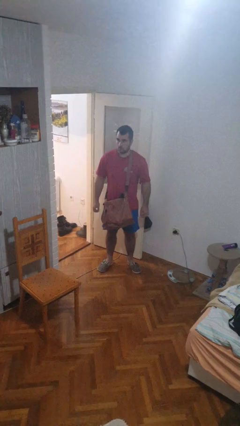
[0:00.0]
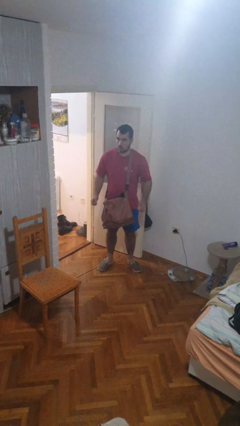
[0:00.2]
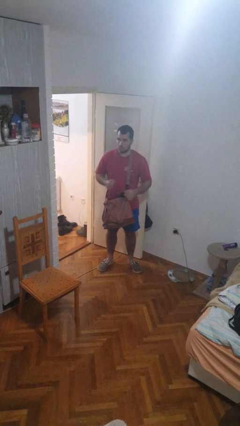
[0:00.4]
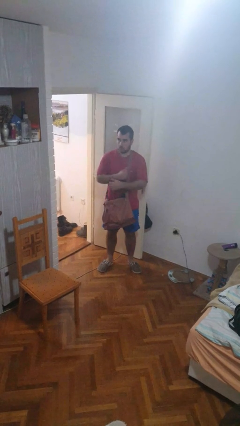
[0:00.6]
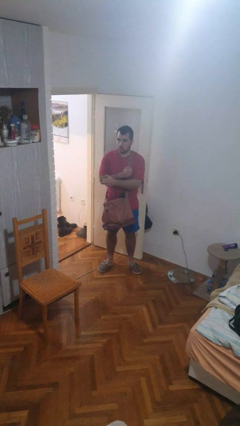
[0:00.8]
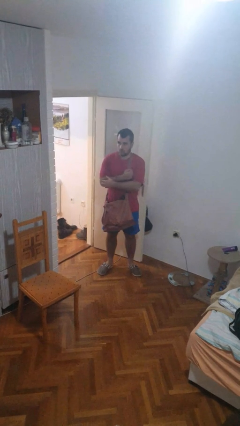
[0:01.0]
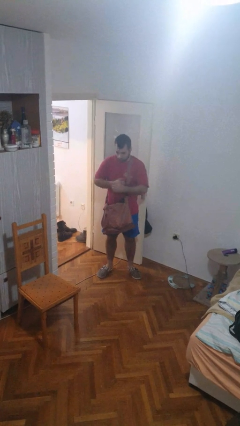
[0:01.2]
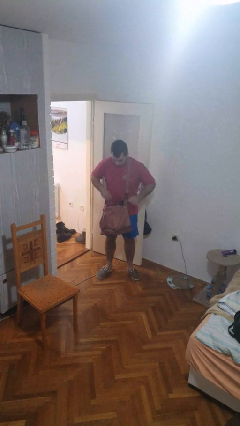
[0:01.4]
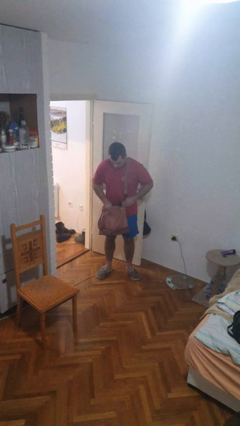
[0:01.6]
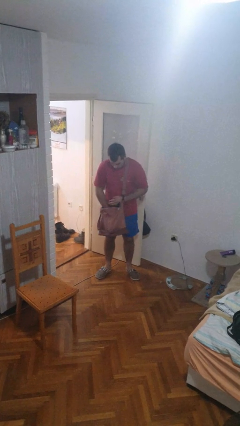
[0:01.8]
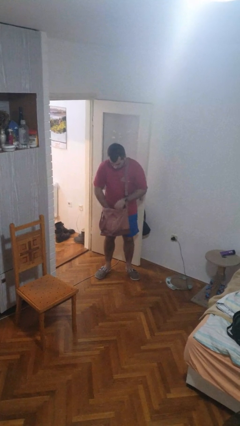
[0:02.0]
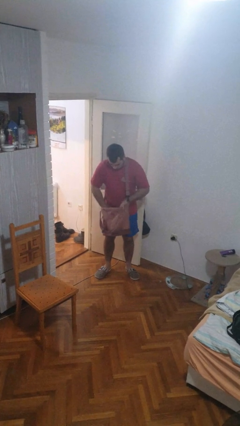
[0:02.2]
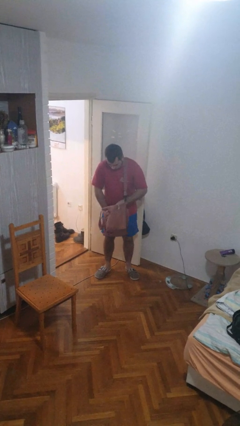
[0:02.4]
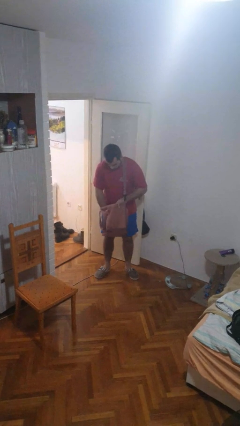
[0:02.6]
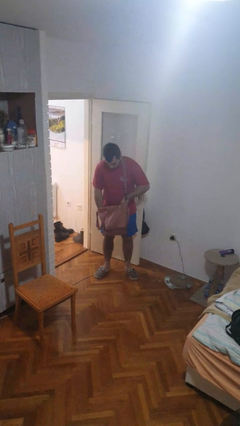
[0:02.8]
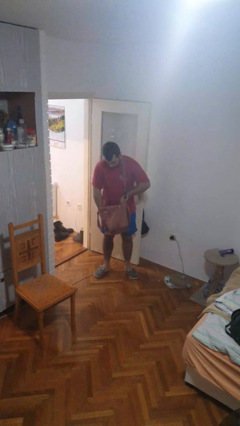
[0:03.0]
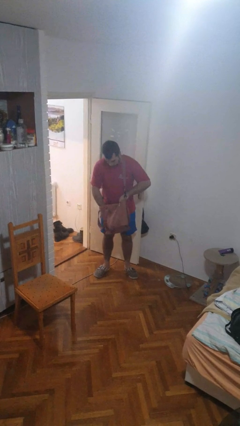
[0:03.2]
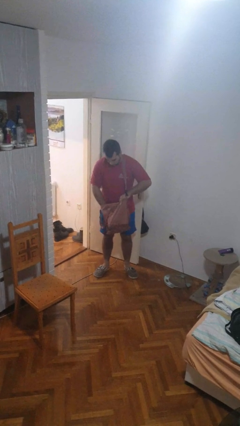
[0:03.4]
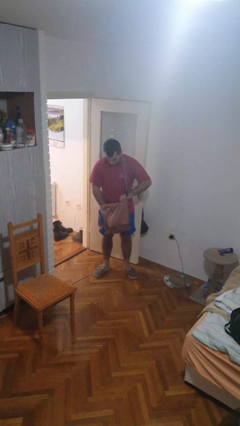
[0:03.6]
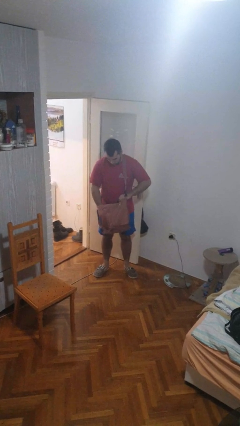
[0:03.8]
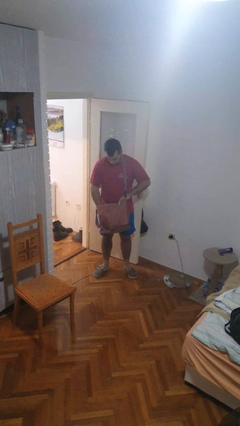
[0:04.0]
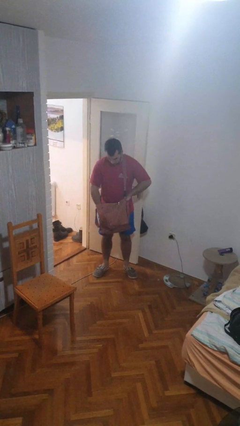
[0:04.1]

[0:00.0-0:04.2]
person searches in purse

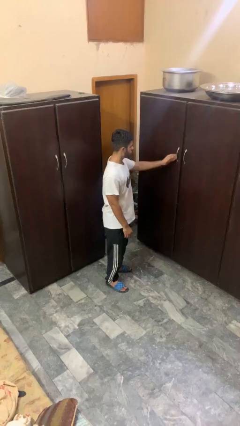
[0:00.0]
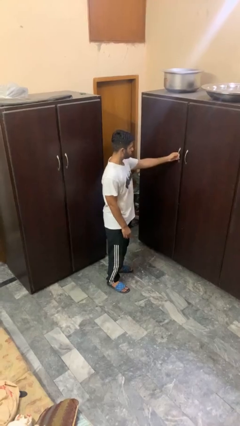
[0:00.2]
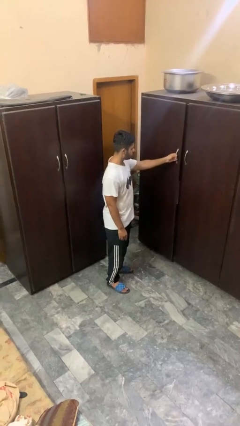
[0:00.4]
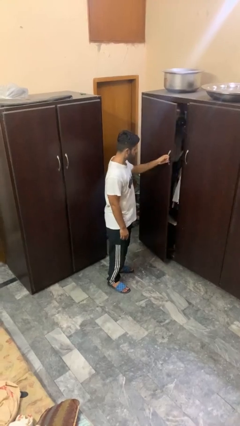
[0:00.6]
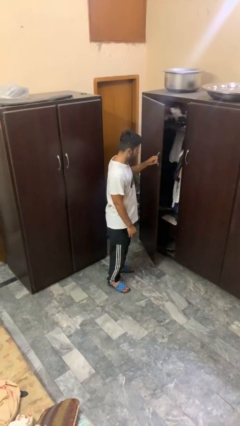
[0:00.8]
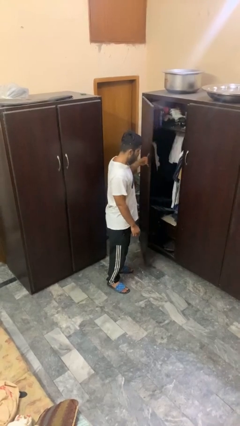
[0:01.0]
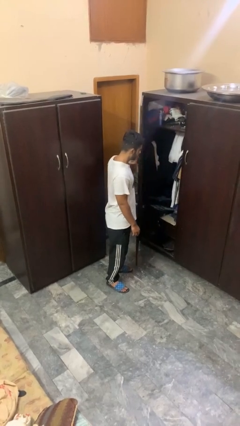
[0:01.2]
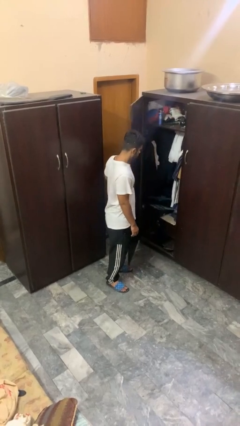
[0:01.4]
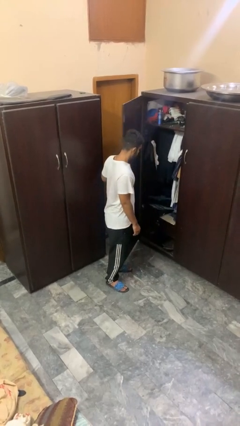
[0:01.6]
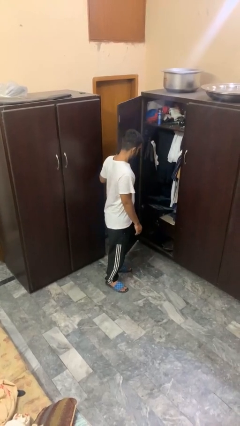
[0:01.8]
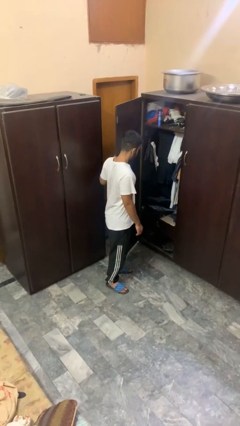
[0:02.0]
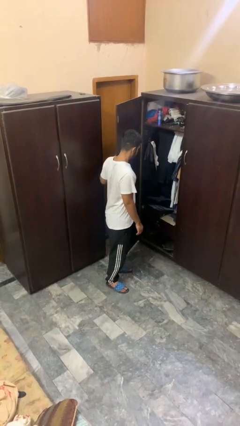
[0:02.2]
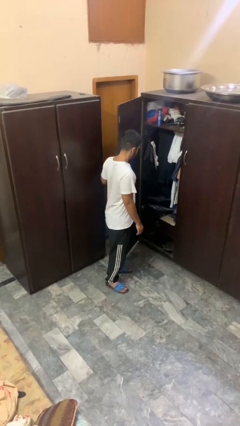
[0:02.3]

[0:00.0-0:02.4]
person opens closet door

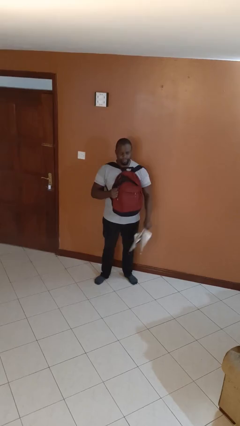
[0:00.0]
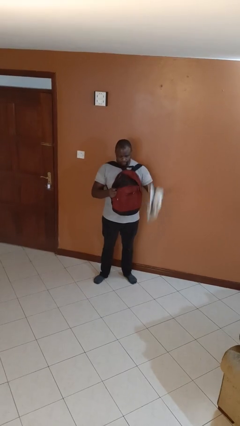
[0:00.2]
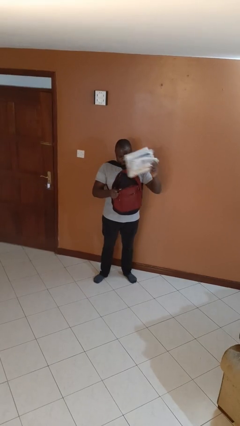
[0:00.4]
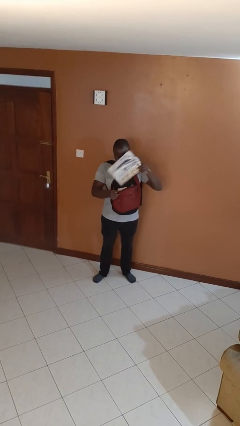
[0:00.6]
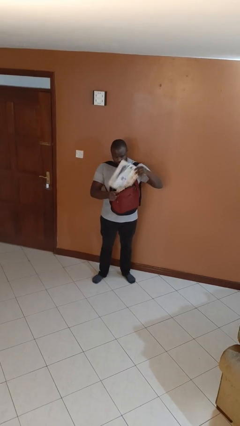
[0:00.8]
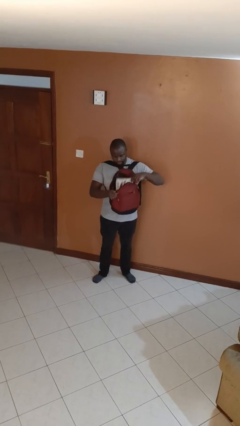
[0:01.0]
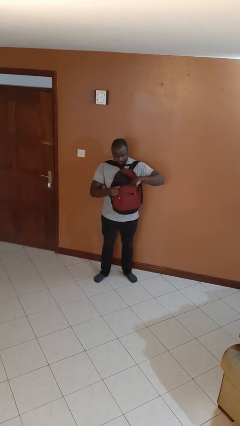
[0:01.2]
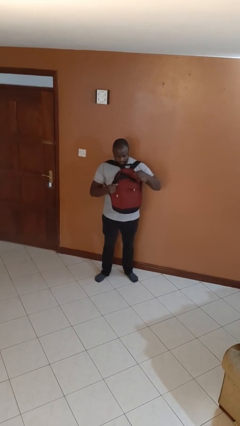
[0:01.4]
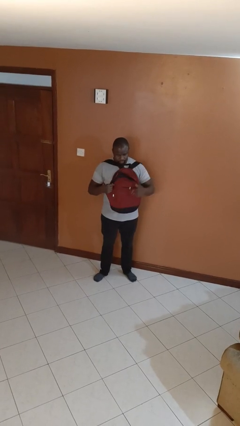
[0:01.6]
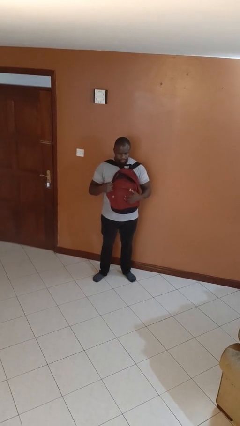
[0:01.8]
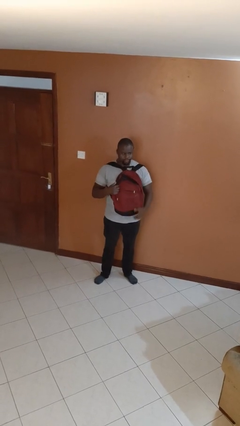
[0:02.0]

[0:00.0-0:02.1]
person puts object into backpack

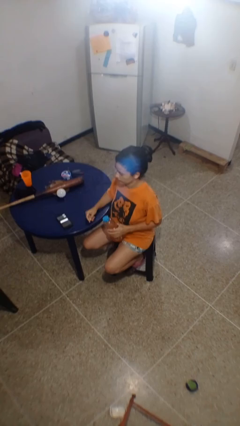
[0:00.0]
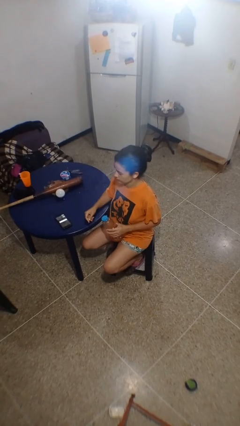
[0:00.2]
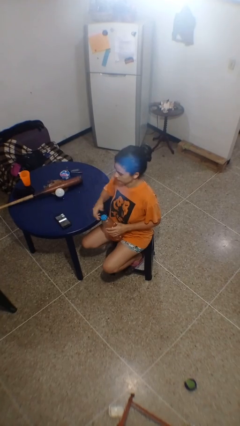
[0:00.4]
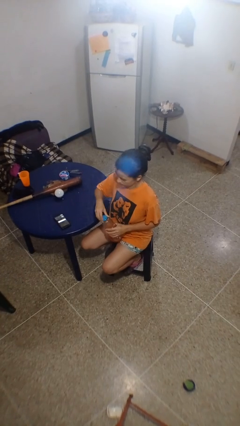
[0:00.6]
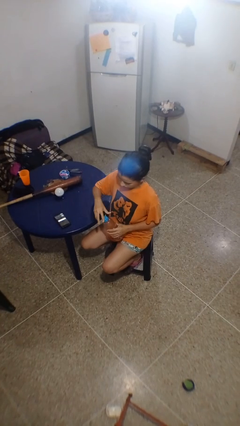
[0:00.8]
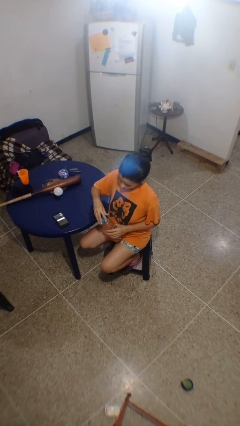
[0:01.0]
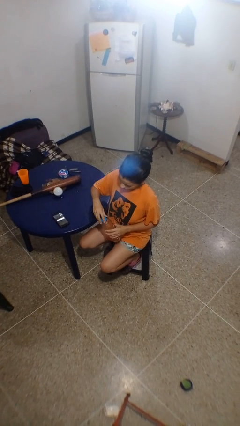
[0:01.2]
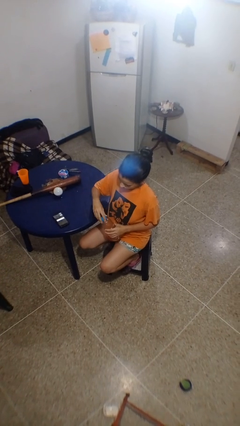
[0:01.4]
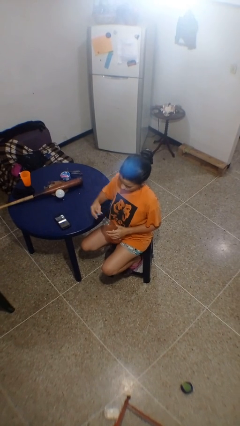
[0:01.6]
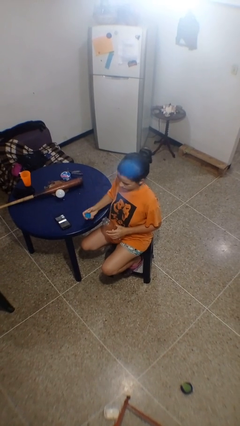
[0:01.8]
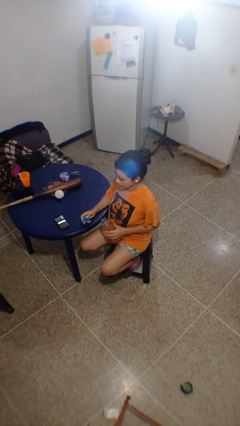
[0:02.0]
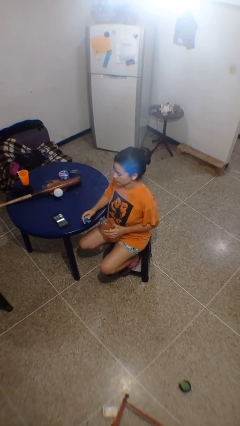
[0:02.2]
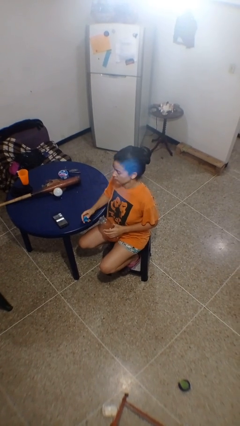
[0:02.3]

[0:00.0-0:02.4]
person unscrews lid from bottle

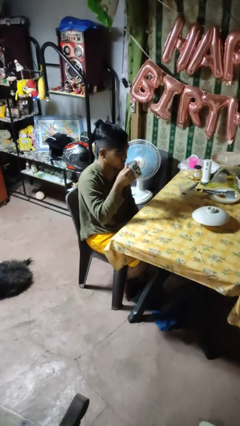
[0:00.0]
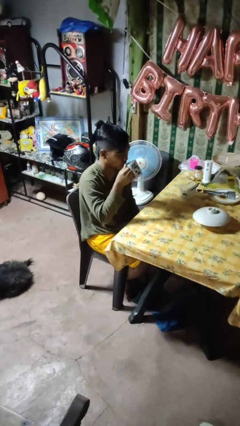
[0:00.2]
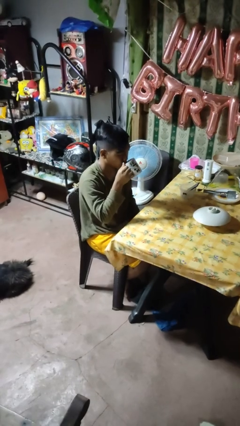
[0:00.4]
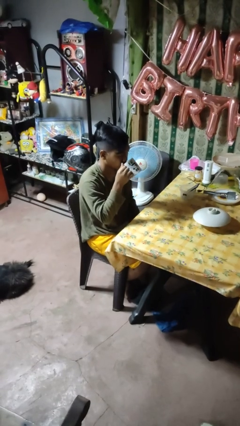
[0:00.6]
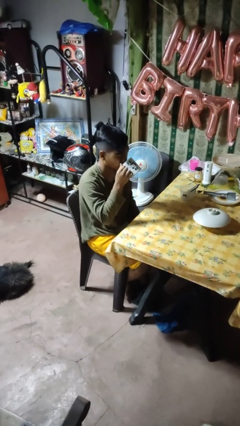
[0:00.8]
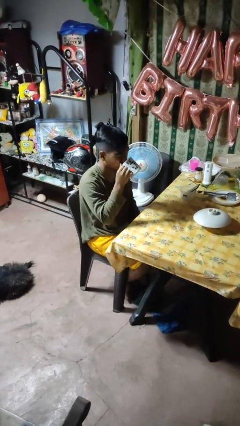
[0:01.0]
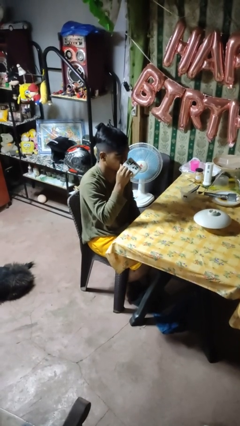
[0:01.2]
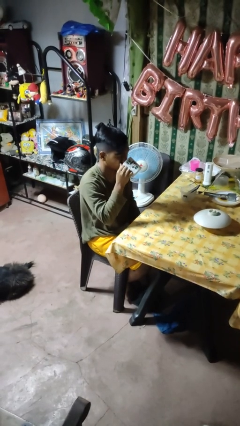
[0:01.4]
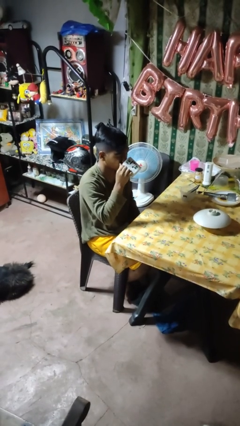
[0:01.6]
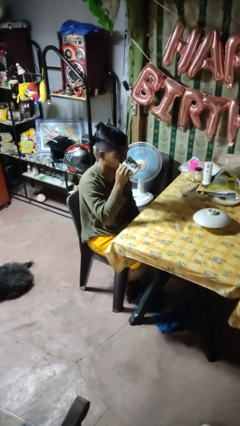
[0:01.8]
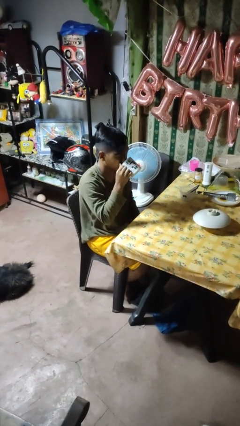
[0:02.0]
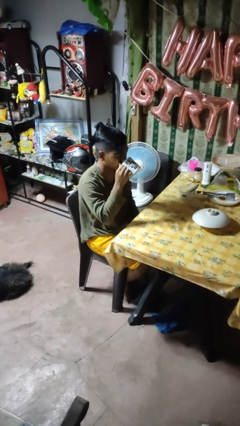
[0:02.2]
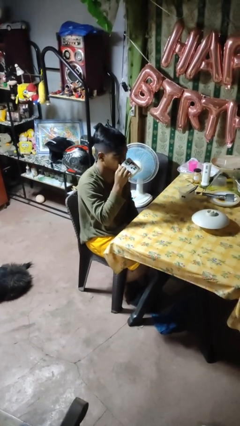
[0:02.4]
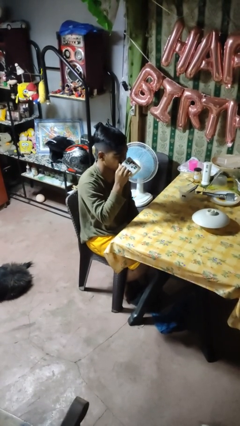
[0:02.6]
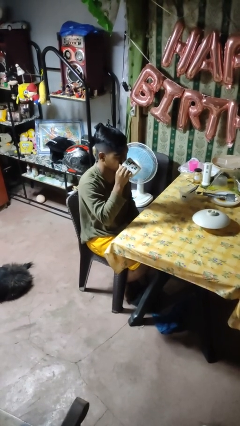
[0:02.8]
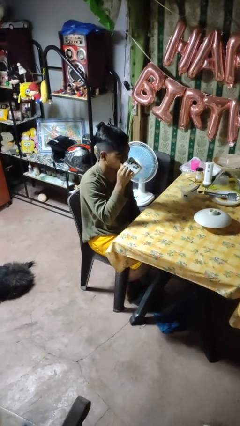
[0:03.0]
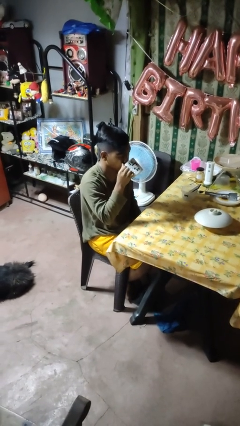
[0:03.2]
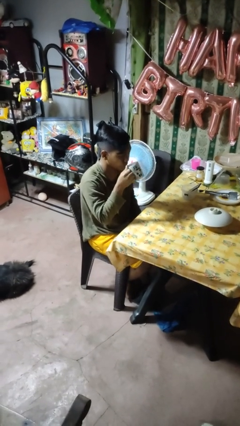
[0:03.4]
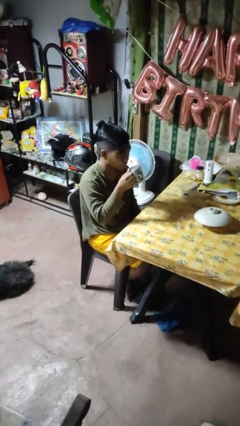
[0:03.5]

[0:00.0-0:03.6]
person drinks from mug

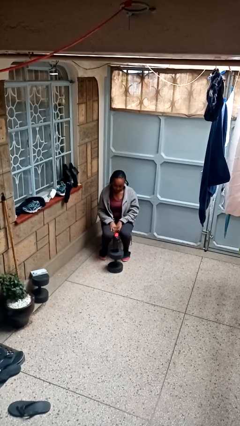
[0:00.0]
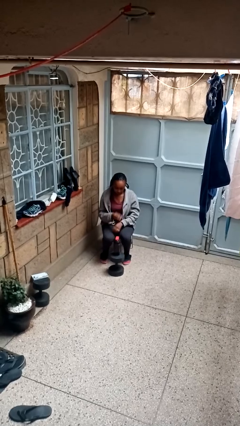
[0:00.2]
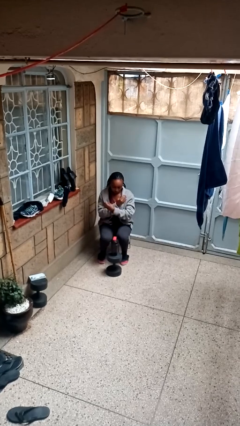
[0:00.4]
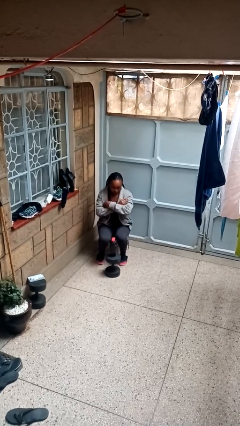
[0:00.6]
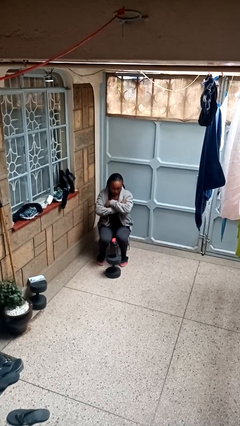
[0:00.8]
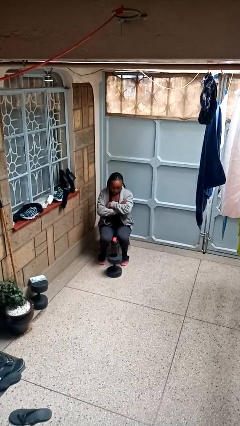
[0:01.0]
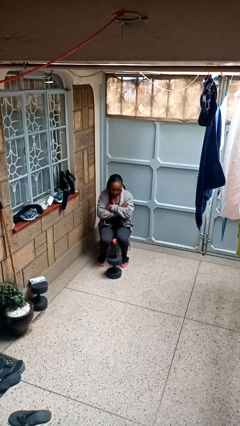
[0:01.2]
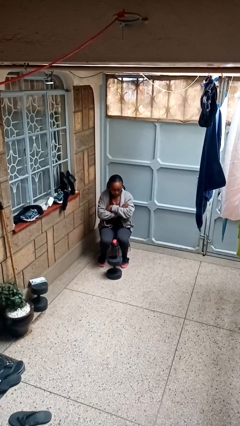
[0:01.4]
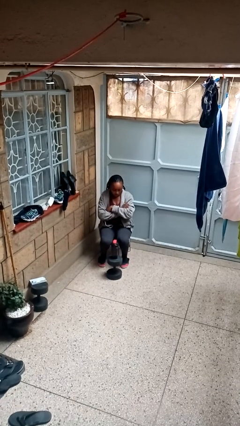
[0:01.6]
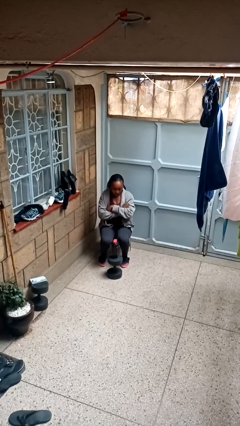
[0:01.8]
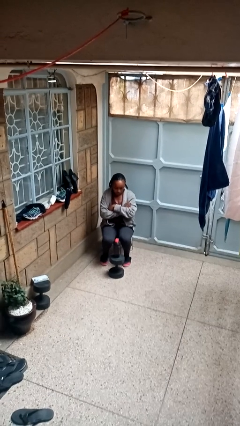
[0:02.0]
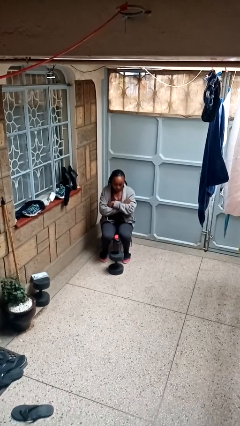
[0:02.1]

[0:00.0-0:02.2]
person gestures arms x

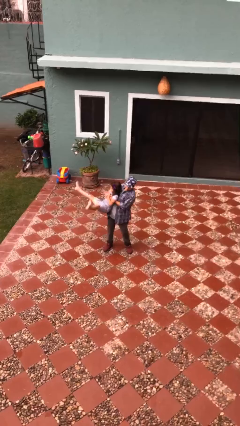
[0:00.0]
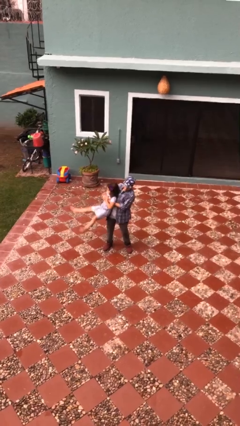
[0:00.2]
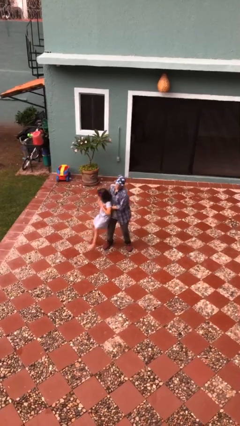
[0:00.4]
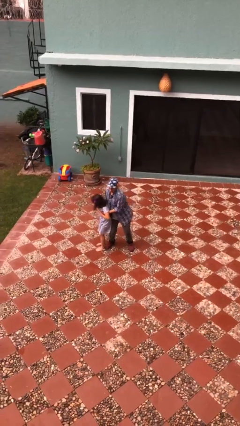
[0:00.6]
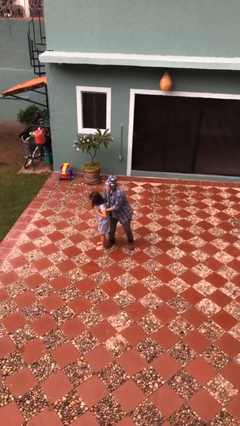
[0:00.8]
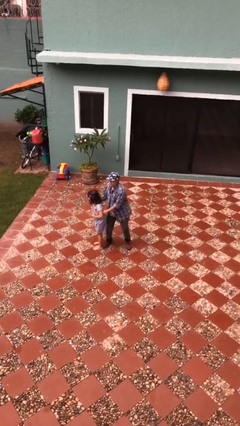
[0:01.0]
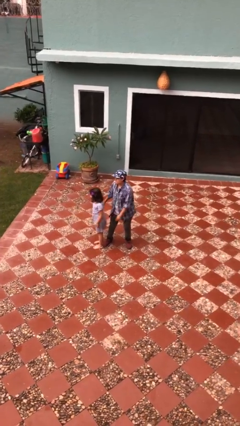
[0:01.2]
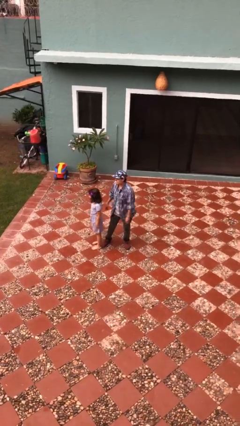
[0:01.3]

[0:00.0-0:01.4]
person puts down person
